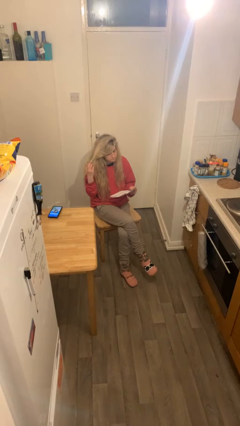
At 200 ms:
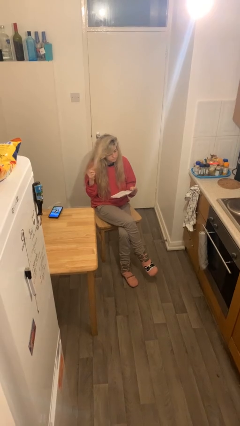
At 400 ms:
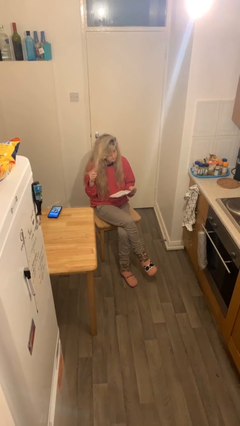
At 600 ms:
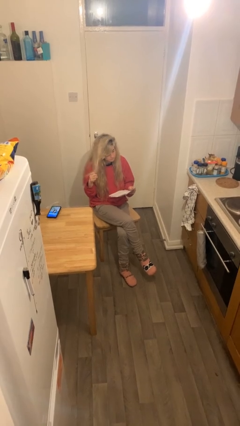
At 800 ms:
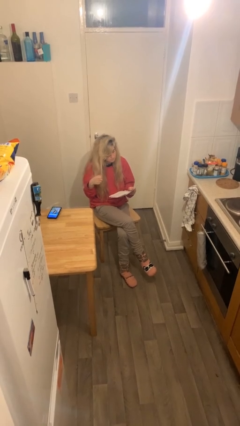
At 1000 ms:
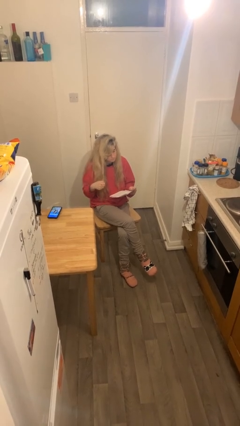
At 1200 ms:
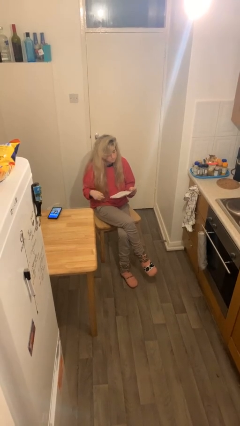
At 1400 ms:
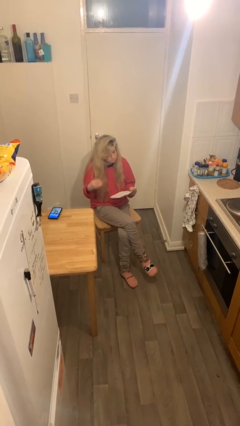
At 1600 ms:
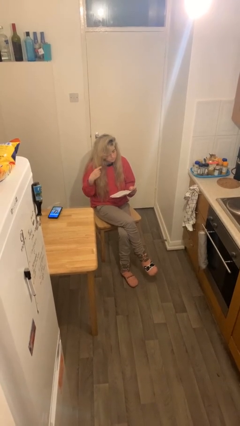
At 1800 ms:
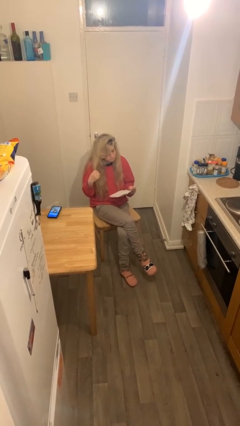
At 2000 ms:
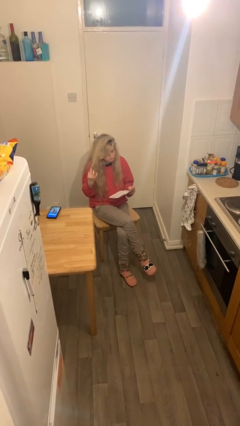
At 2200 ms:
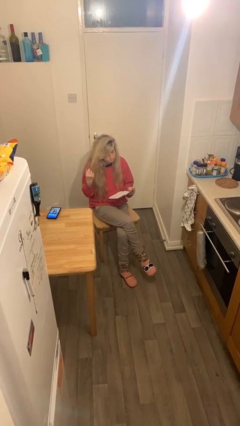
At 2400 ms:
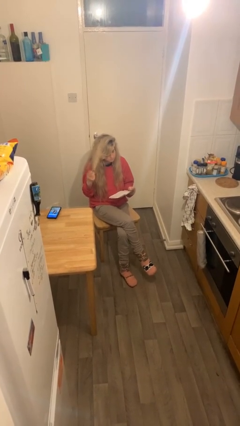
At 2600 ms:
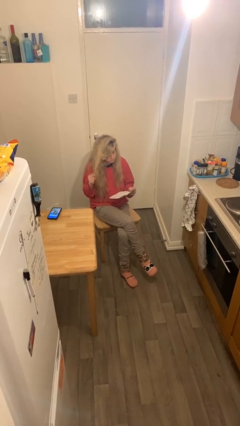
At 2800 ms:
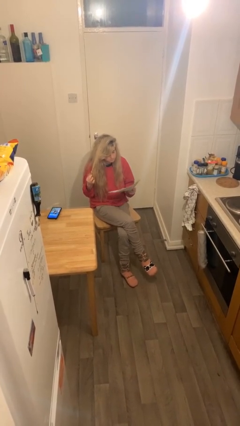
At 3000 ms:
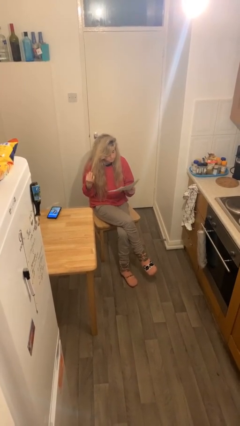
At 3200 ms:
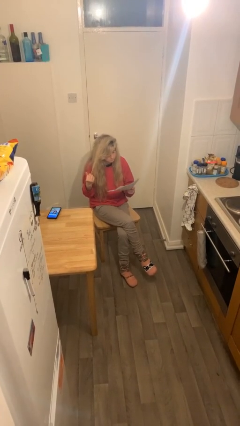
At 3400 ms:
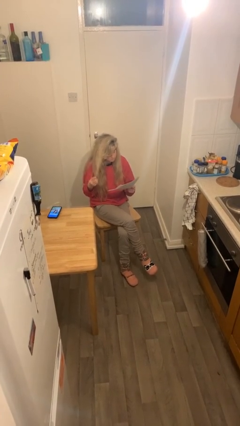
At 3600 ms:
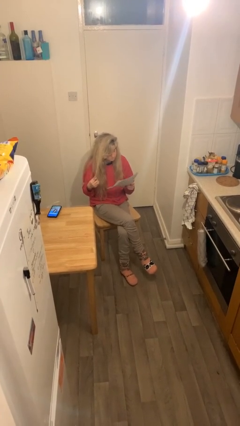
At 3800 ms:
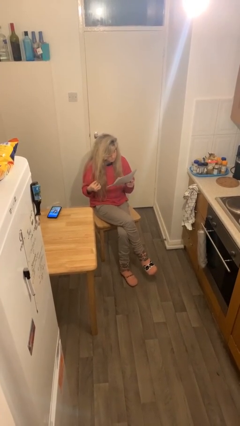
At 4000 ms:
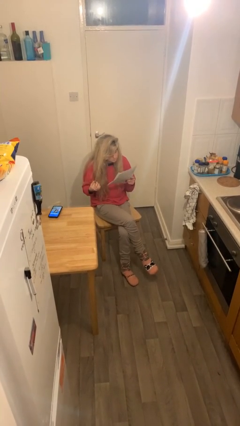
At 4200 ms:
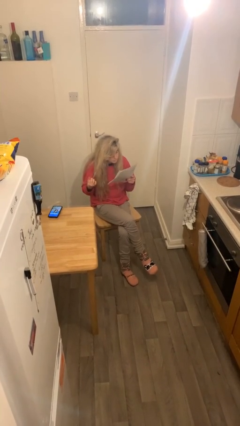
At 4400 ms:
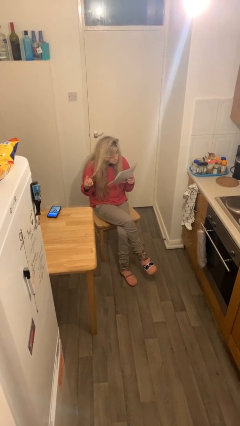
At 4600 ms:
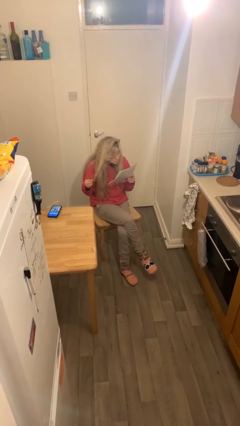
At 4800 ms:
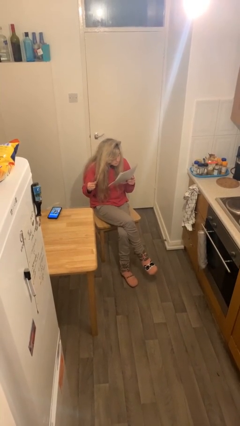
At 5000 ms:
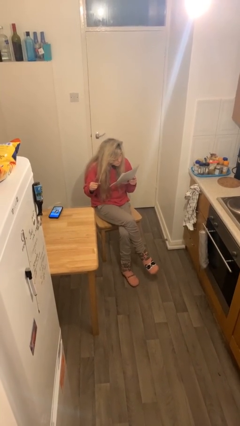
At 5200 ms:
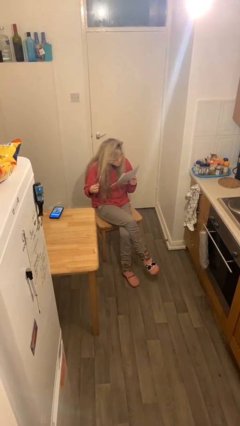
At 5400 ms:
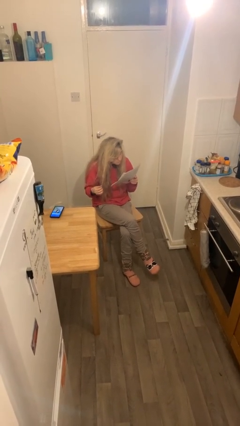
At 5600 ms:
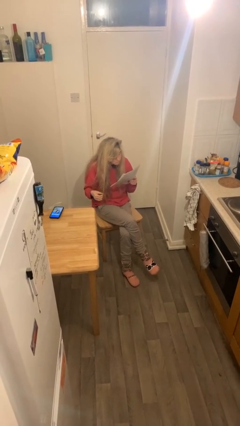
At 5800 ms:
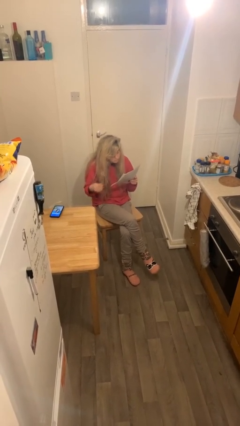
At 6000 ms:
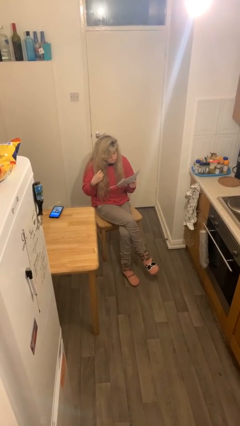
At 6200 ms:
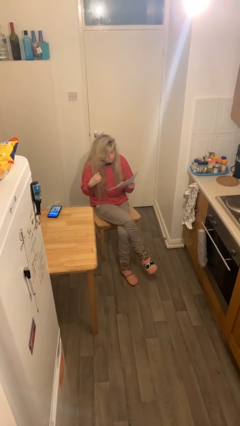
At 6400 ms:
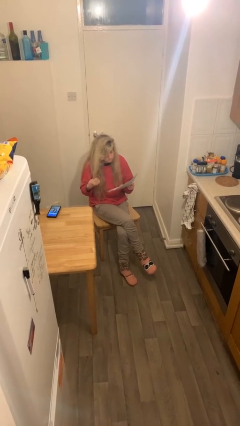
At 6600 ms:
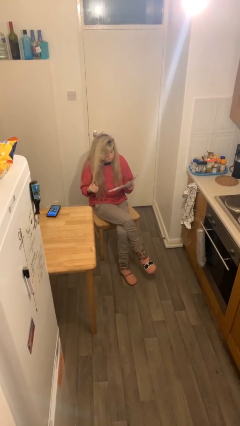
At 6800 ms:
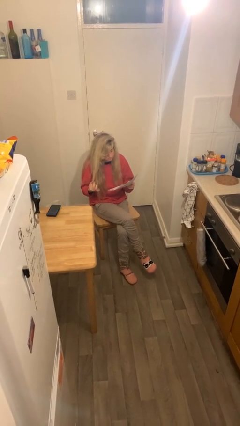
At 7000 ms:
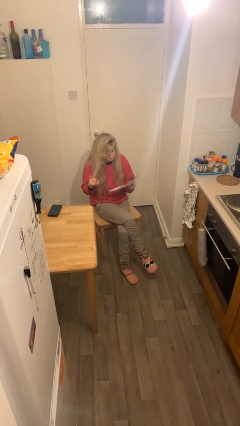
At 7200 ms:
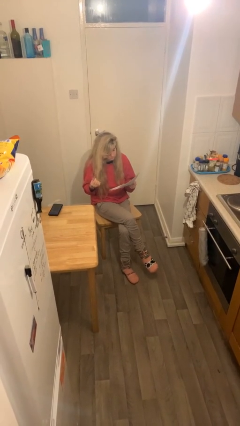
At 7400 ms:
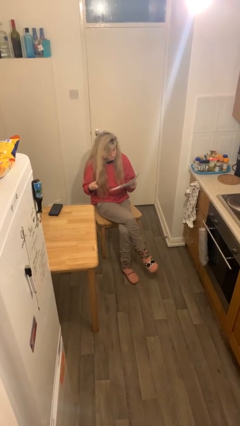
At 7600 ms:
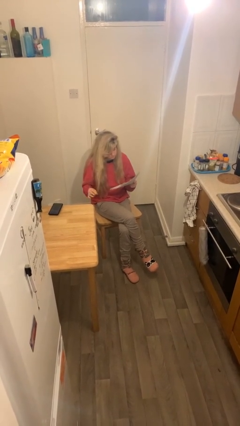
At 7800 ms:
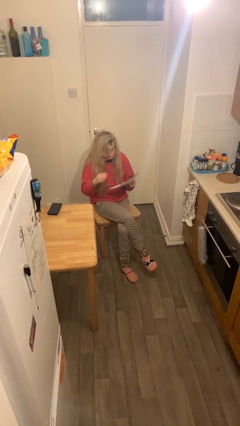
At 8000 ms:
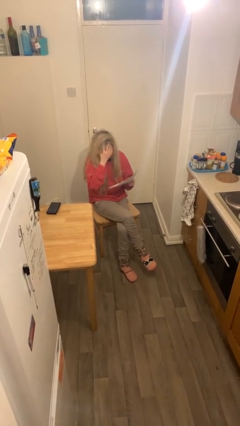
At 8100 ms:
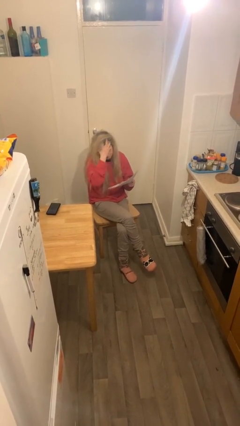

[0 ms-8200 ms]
person reads document

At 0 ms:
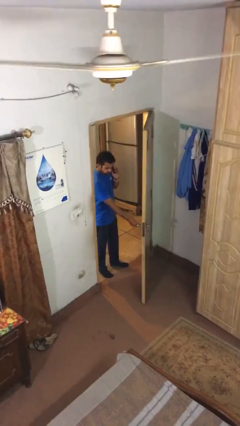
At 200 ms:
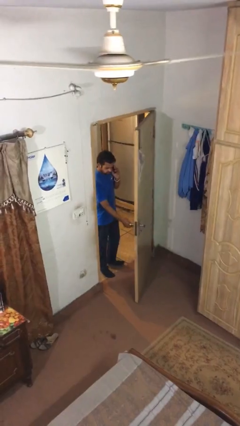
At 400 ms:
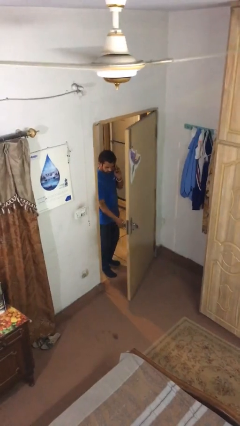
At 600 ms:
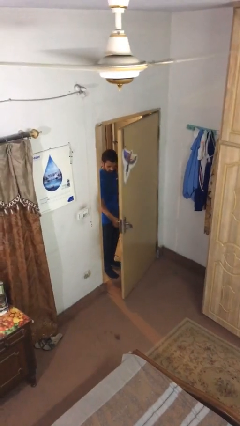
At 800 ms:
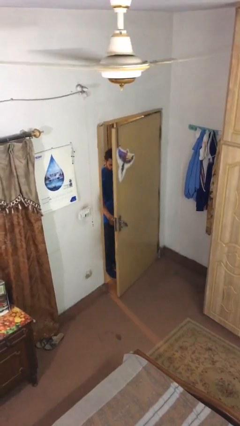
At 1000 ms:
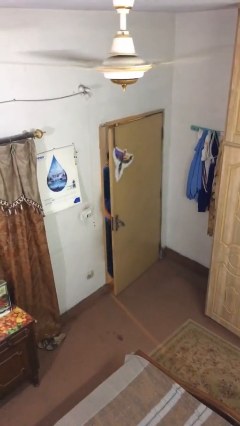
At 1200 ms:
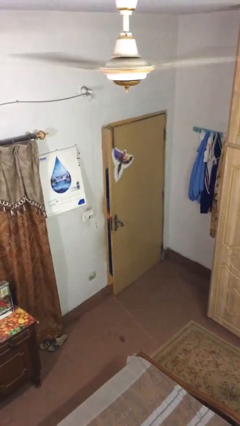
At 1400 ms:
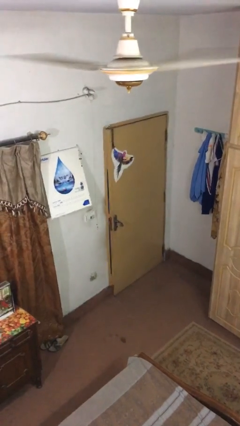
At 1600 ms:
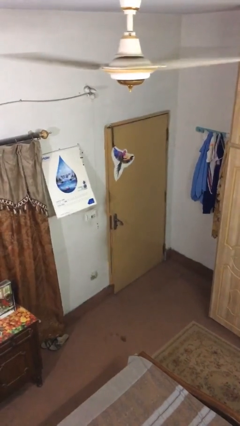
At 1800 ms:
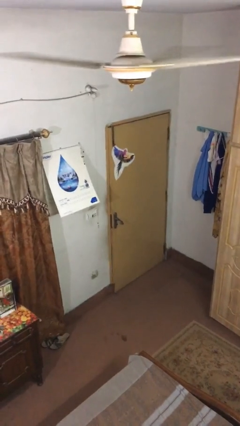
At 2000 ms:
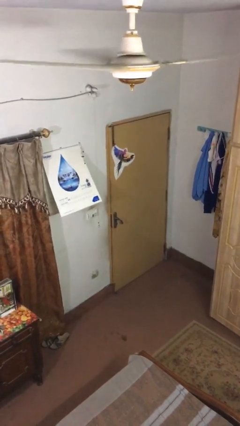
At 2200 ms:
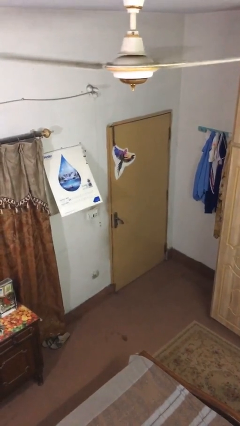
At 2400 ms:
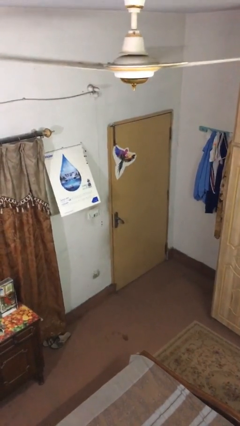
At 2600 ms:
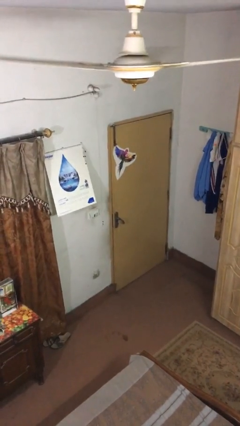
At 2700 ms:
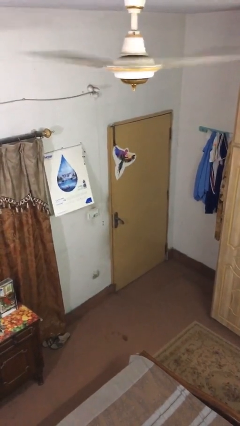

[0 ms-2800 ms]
person closes facility door

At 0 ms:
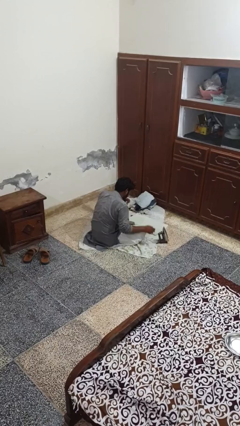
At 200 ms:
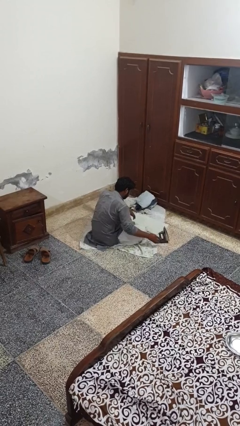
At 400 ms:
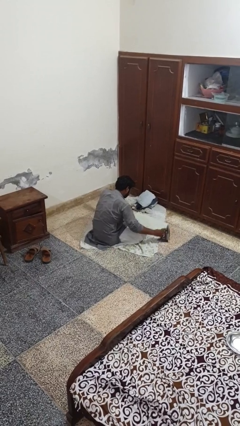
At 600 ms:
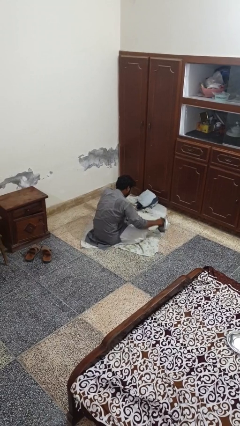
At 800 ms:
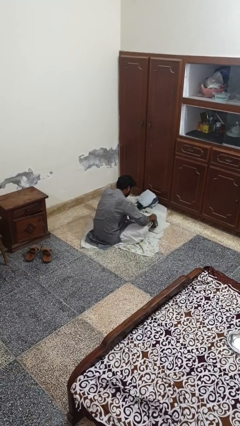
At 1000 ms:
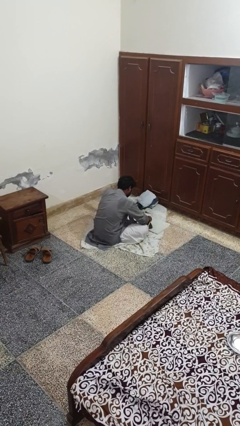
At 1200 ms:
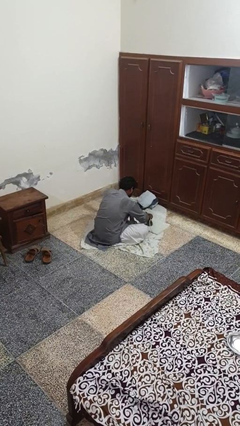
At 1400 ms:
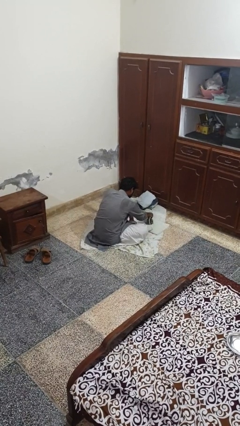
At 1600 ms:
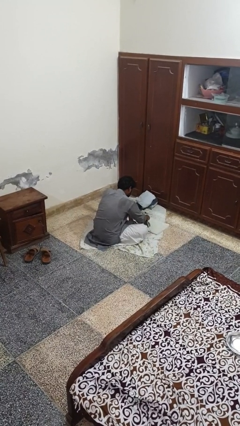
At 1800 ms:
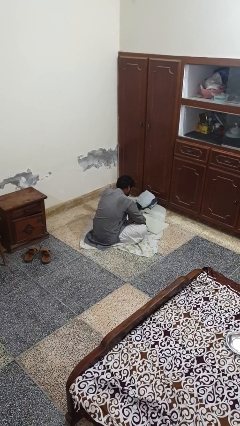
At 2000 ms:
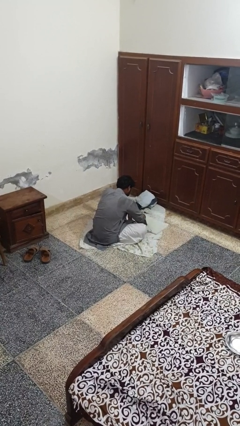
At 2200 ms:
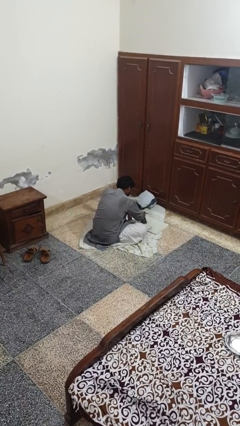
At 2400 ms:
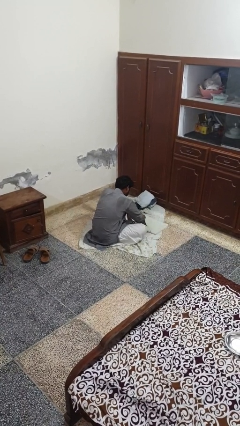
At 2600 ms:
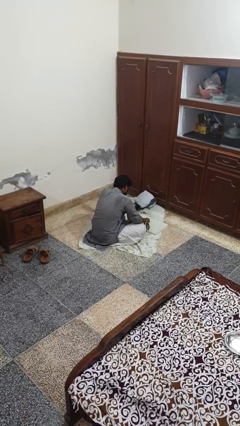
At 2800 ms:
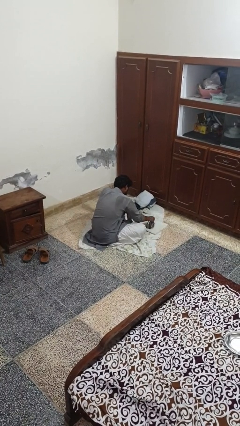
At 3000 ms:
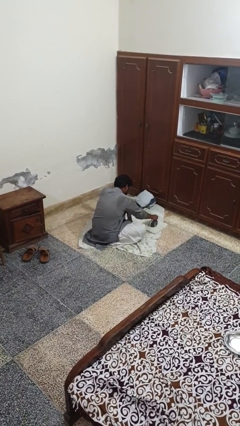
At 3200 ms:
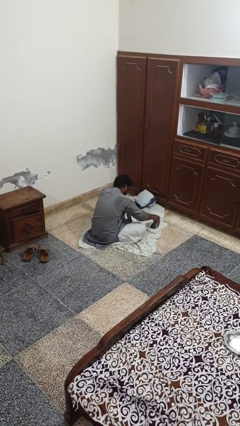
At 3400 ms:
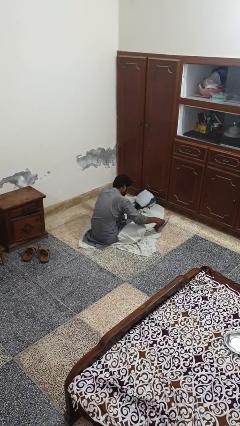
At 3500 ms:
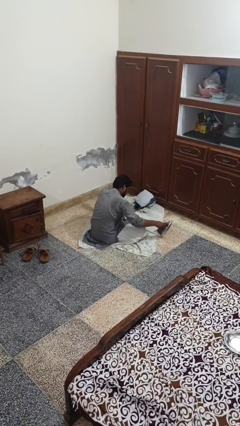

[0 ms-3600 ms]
person irons clothes

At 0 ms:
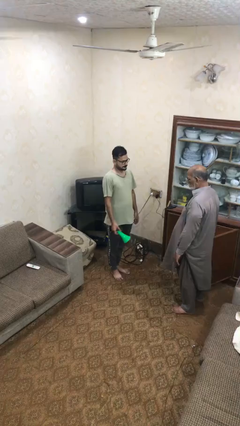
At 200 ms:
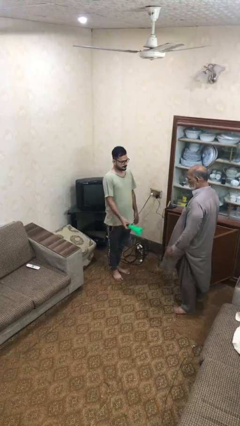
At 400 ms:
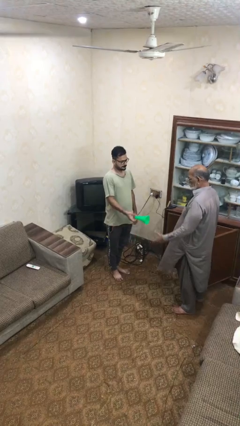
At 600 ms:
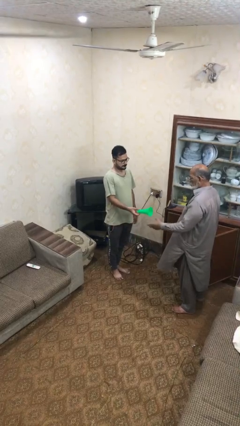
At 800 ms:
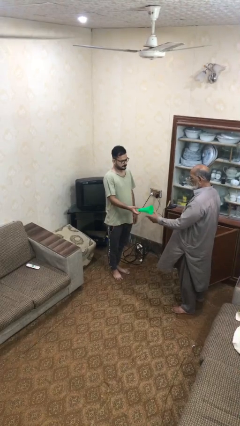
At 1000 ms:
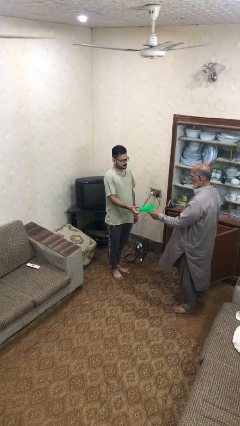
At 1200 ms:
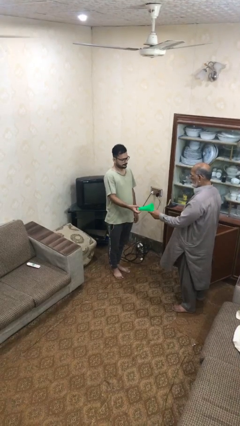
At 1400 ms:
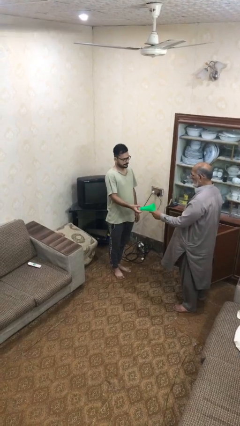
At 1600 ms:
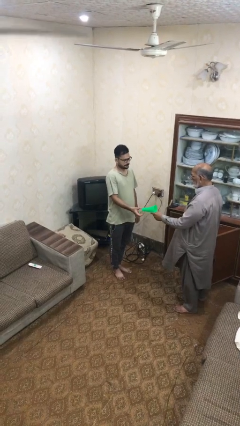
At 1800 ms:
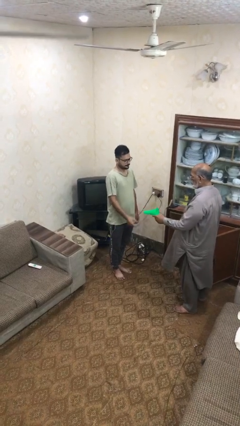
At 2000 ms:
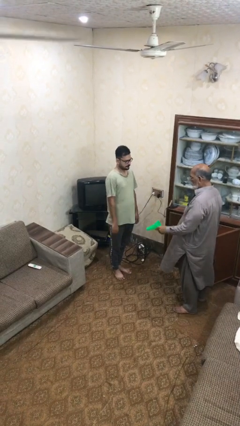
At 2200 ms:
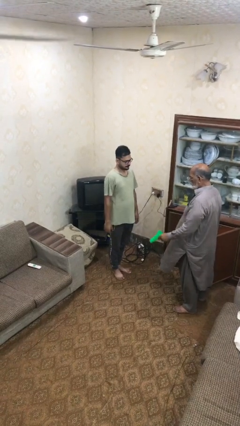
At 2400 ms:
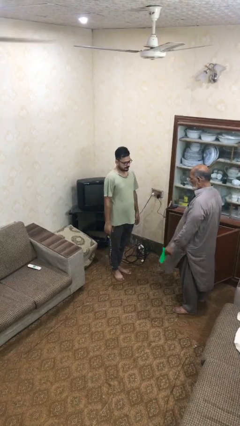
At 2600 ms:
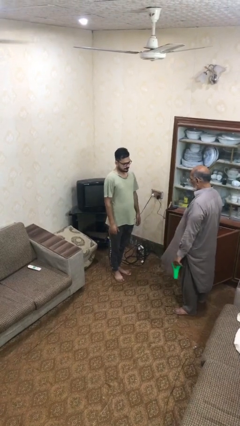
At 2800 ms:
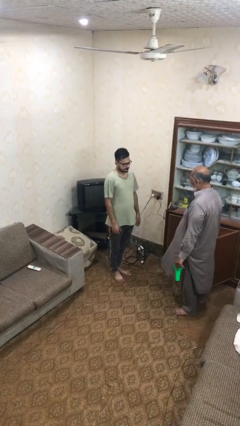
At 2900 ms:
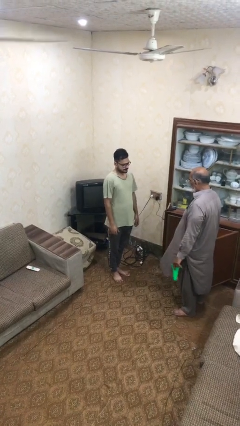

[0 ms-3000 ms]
person transfers object to person
